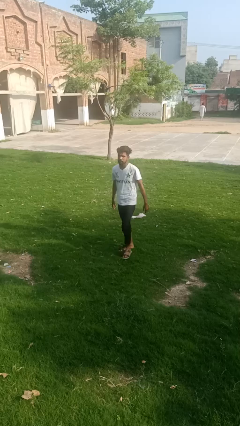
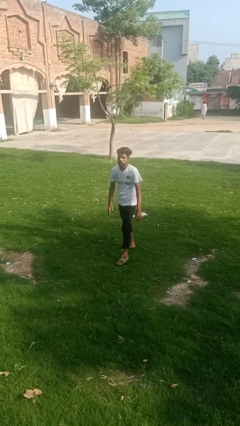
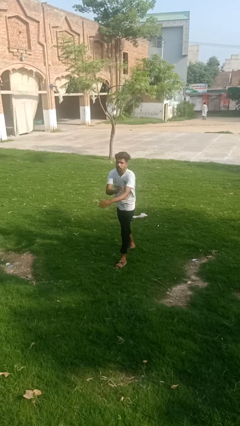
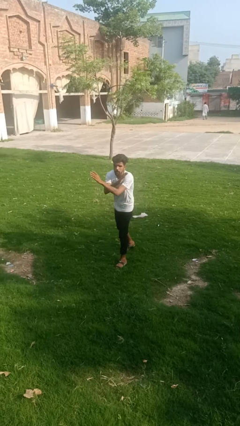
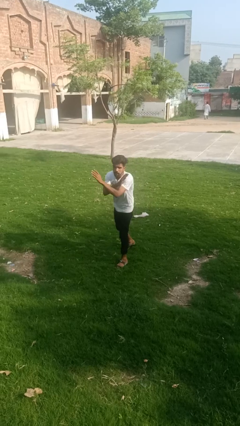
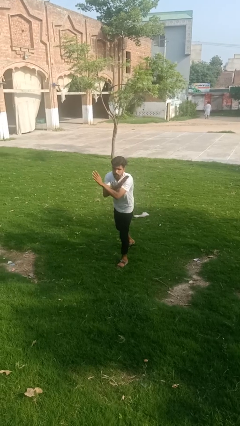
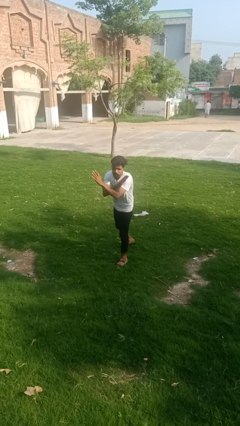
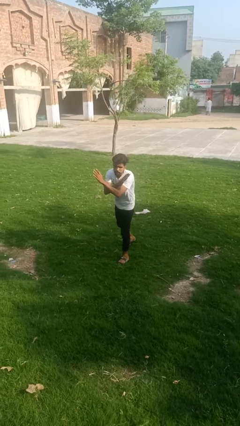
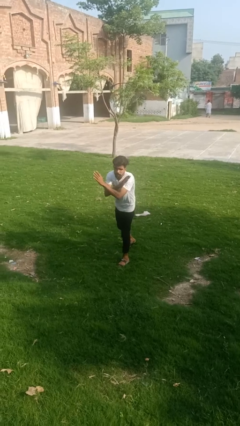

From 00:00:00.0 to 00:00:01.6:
person crosses arms

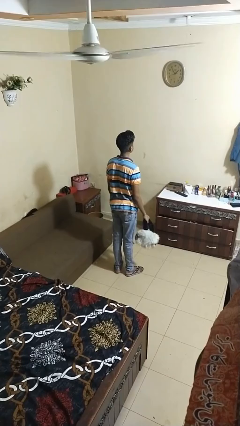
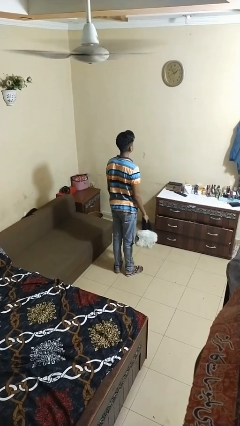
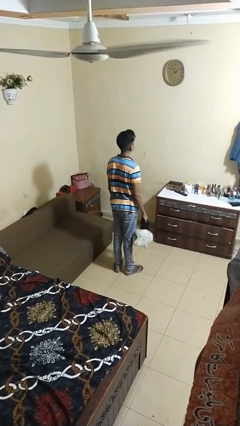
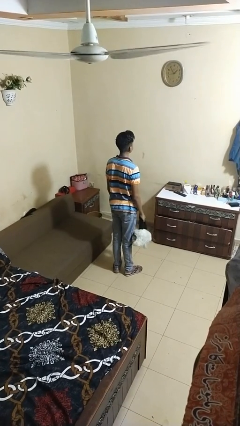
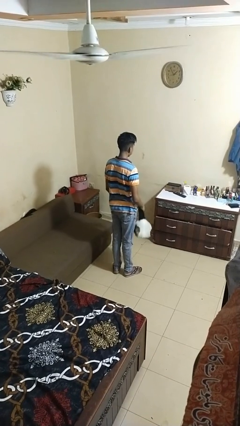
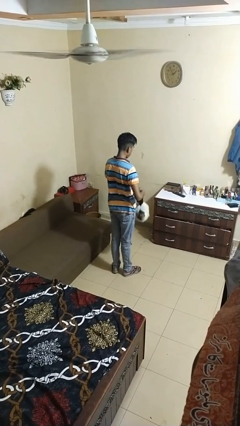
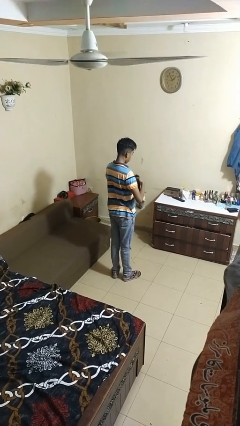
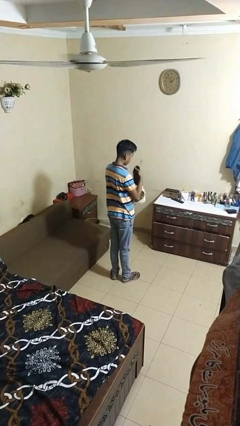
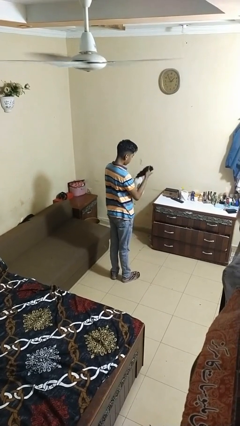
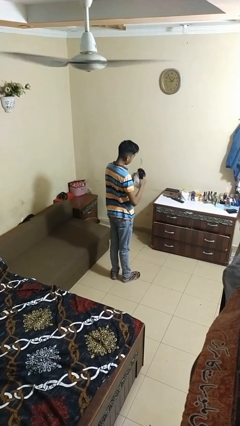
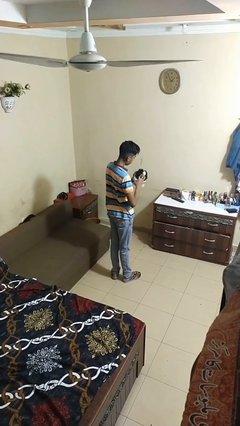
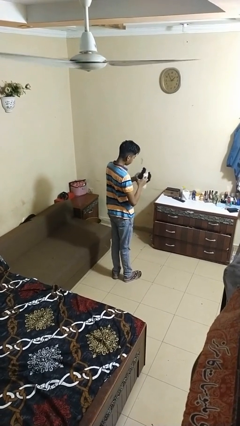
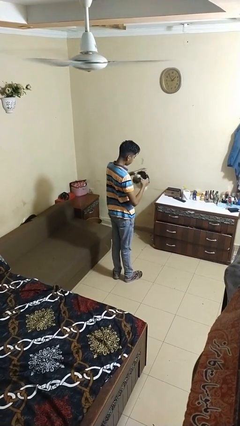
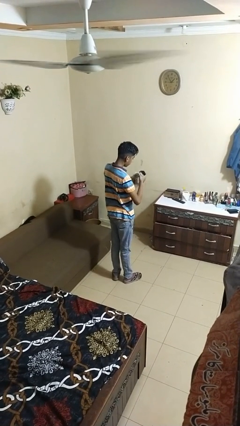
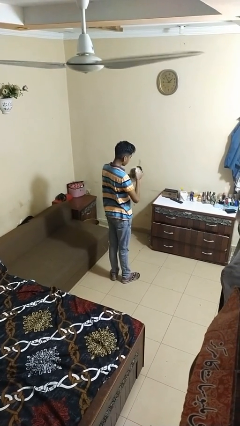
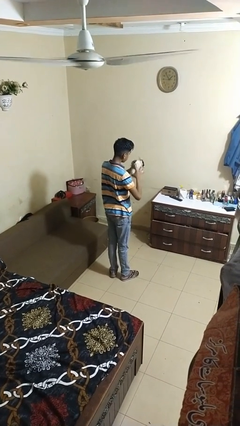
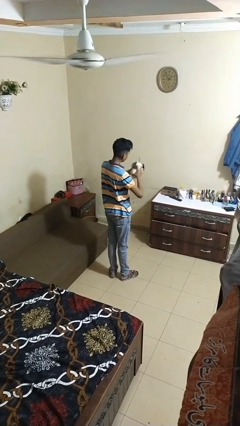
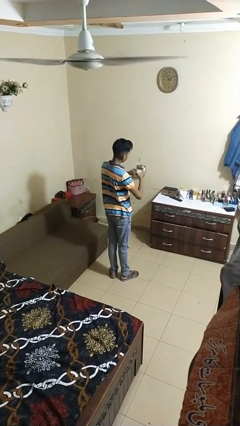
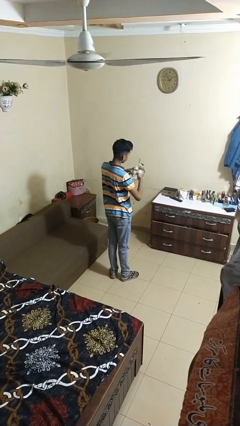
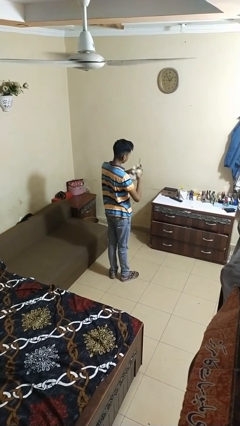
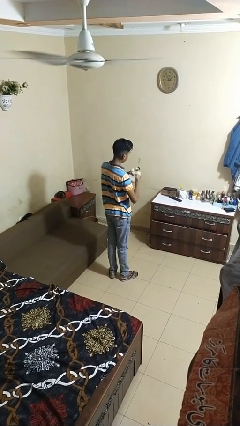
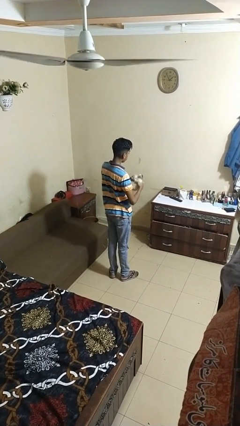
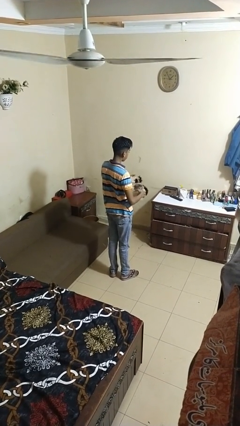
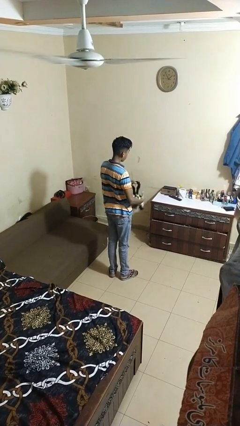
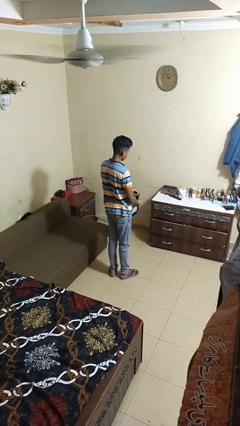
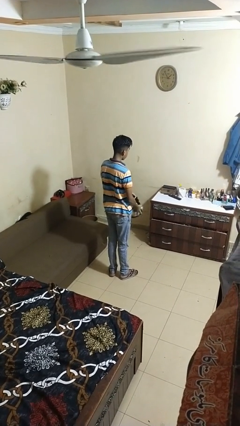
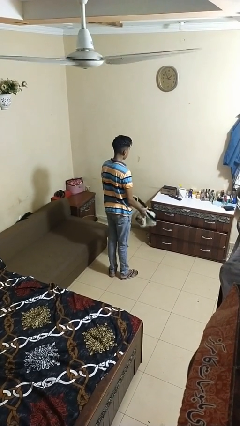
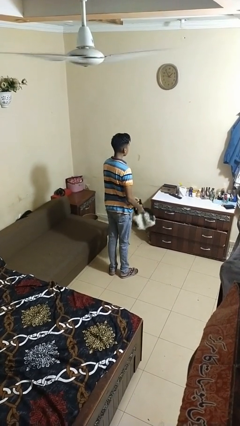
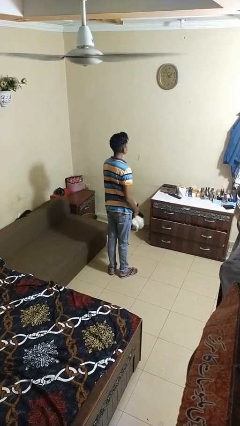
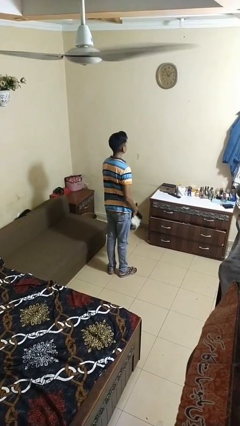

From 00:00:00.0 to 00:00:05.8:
person squeezes object

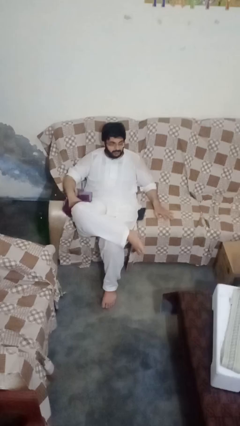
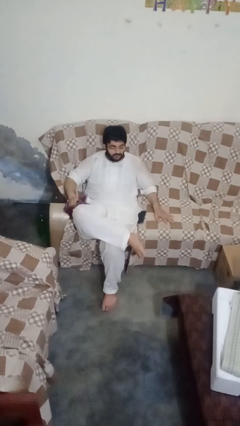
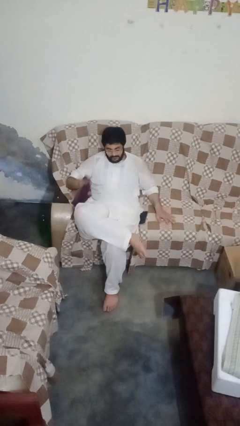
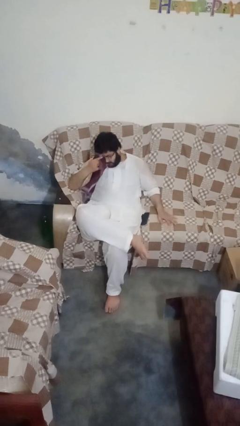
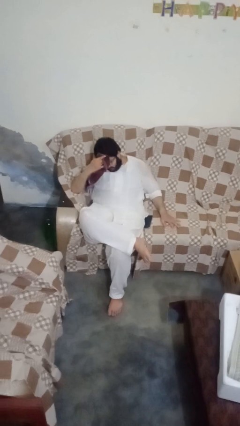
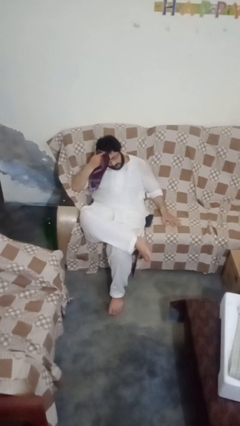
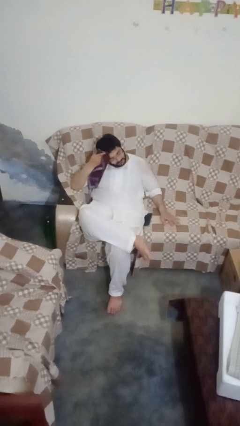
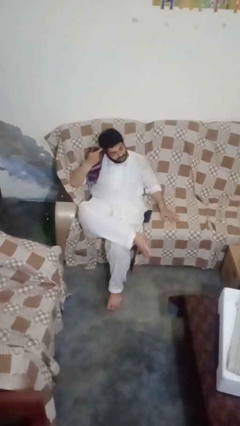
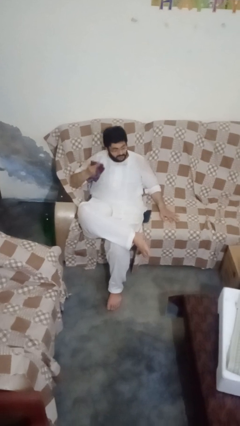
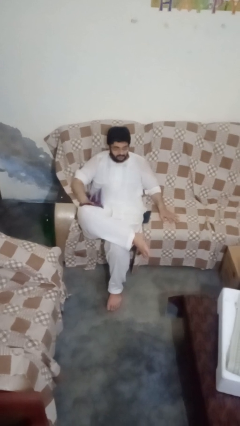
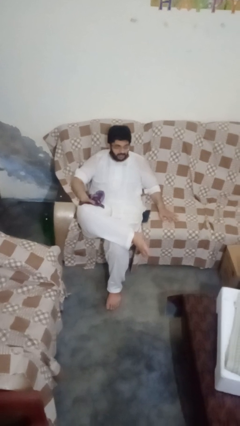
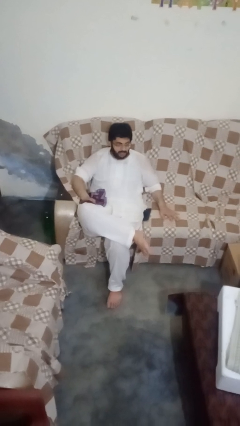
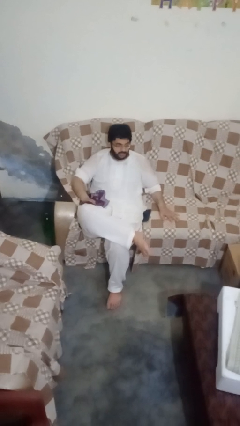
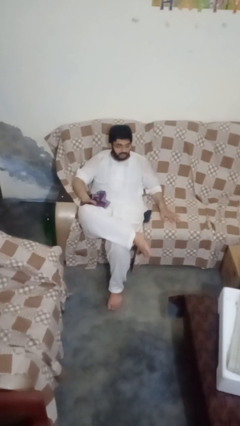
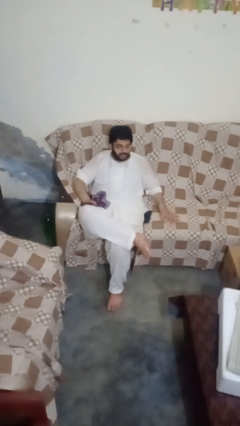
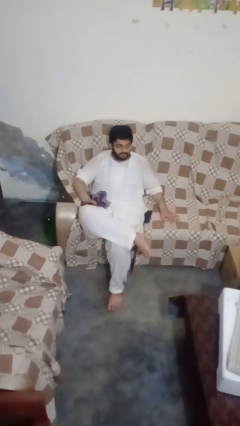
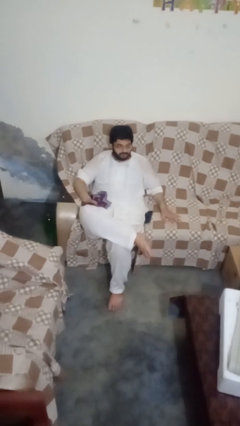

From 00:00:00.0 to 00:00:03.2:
person wipes mouth with napkin

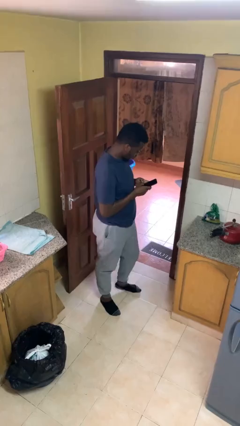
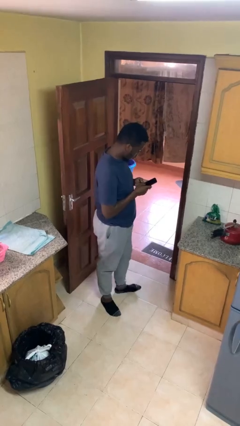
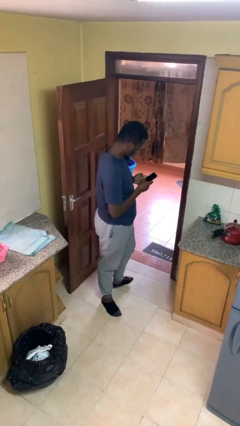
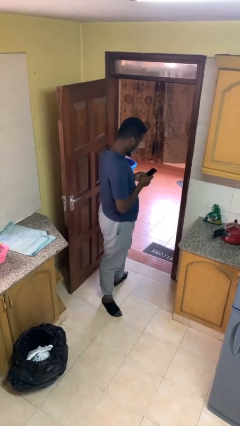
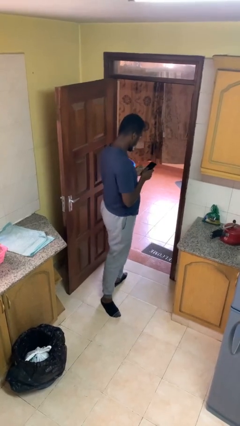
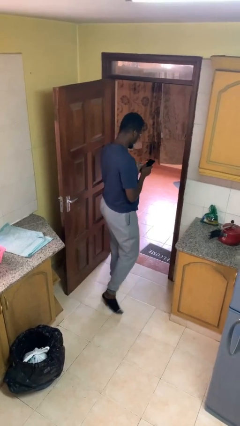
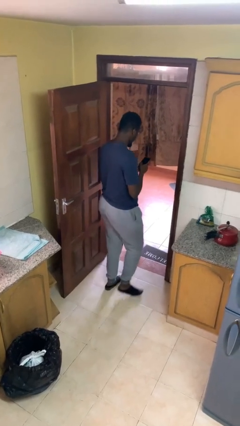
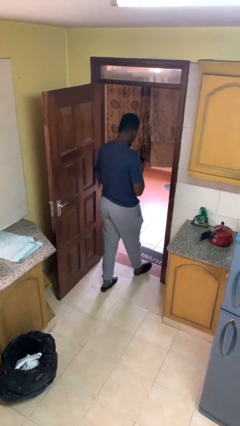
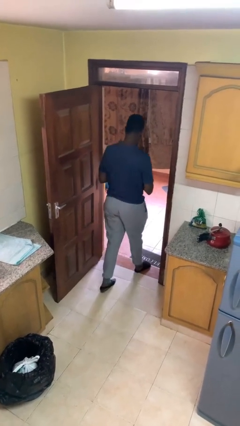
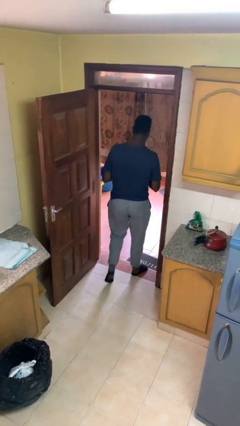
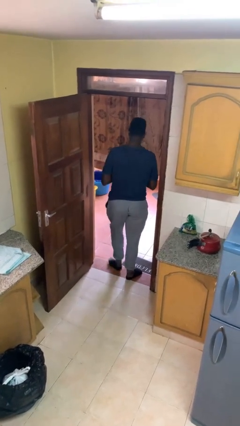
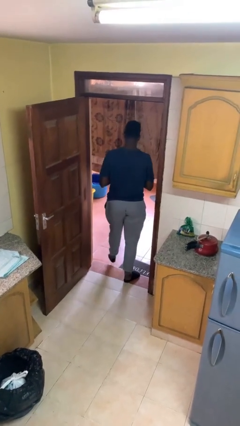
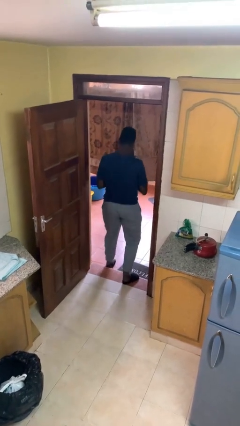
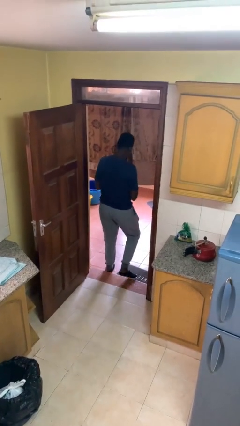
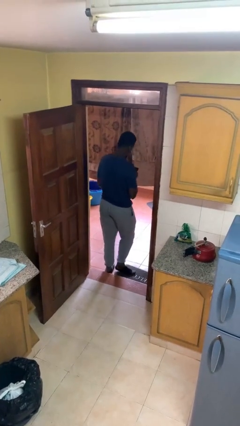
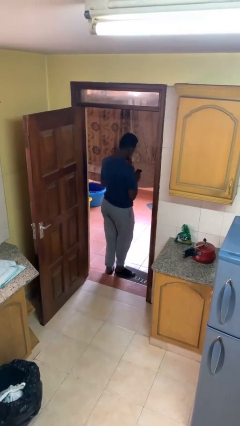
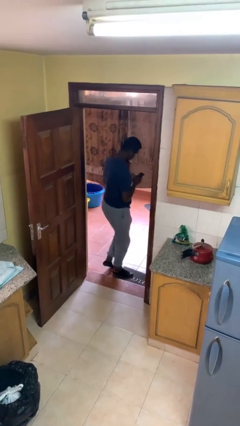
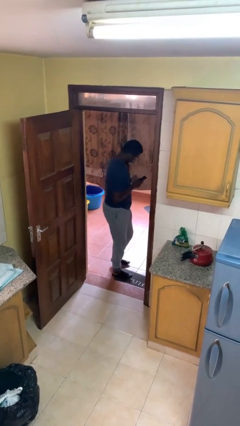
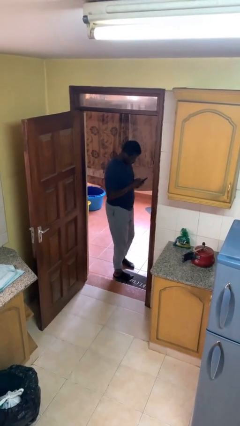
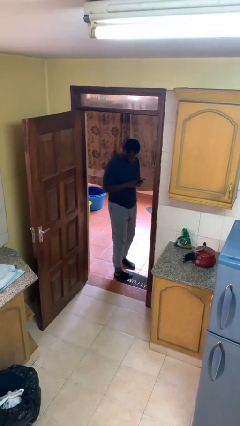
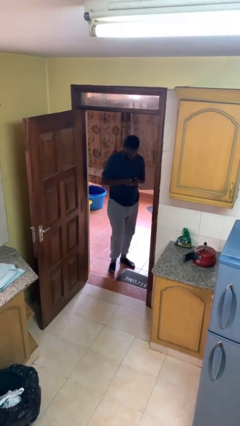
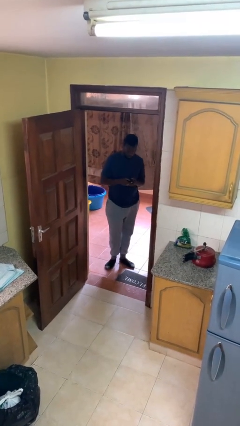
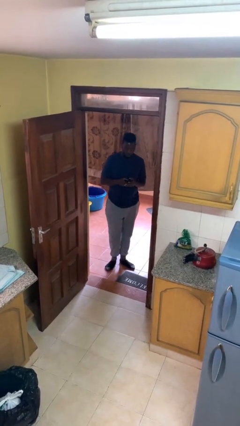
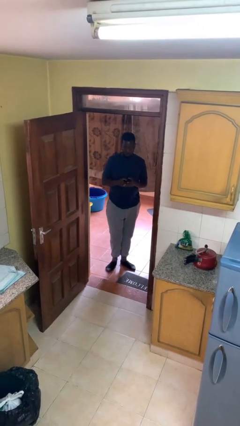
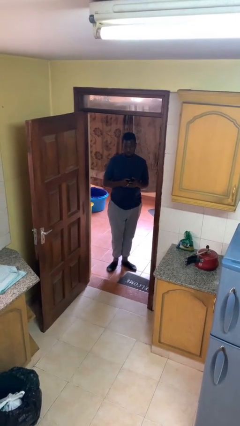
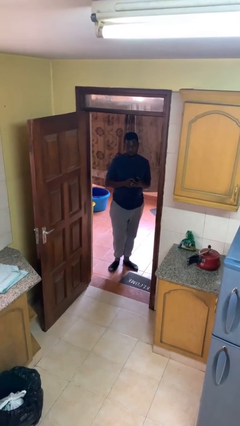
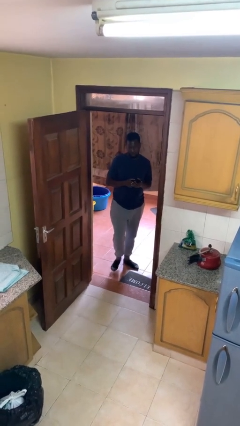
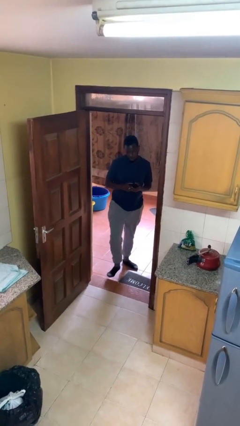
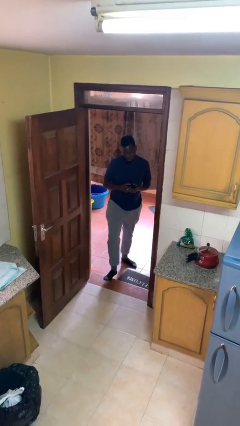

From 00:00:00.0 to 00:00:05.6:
person exits scene through structure

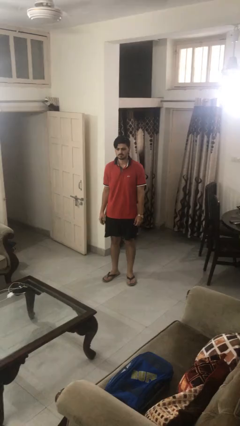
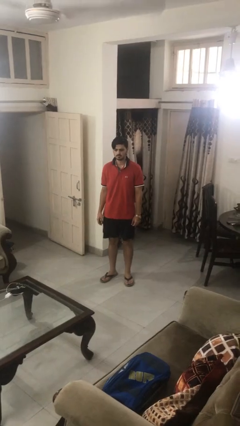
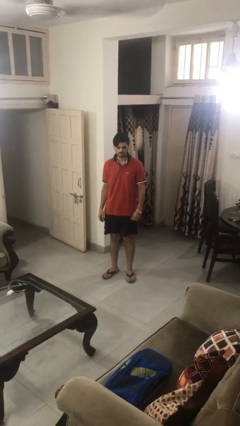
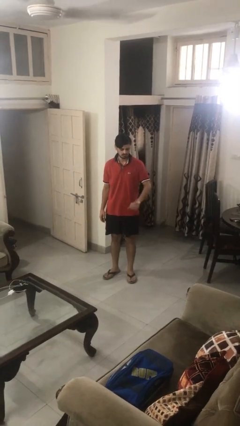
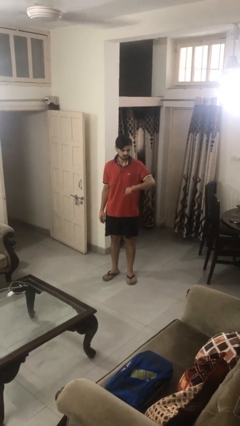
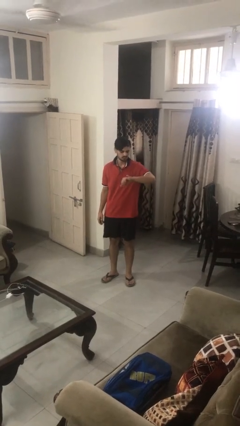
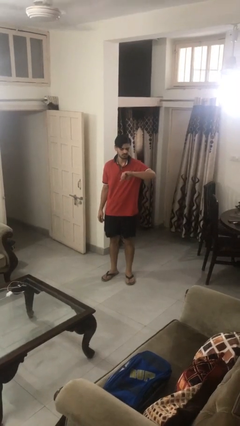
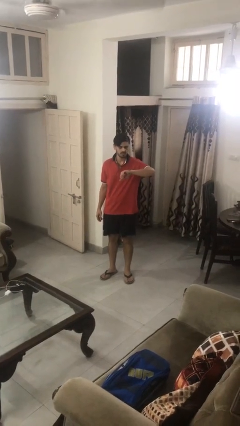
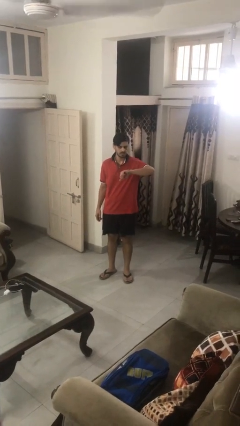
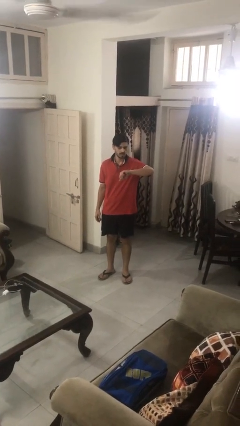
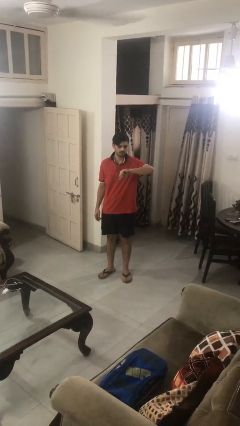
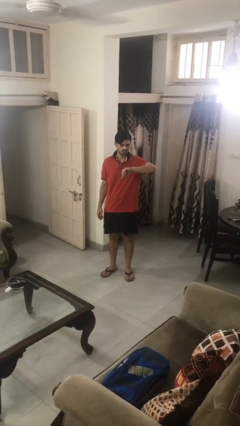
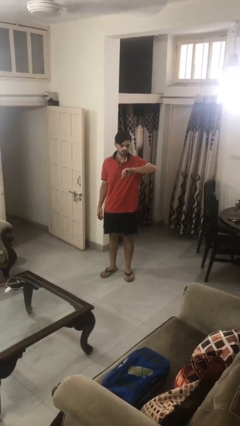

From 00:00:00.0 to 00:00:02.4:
person looks at wristwatch
